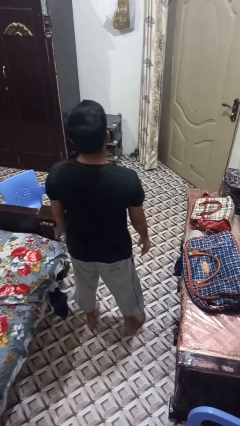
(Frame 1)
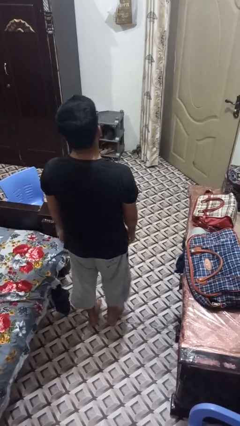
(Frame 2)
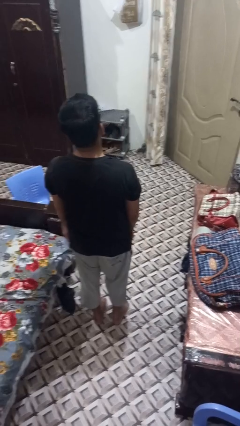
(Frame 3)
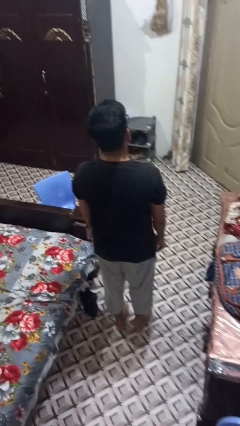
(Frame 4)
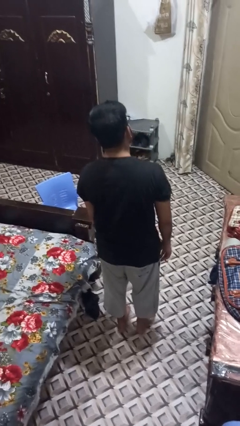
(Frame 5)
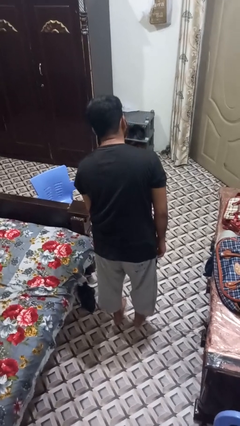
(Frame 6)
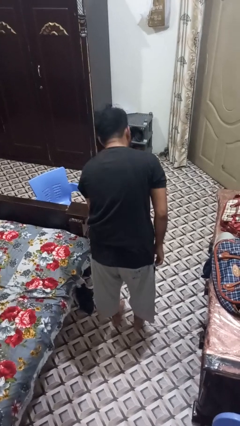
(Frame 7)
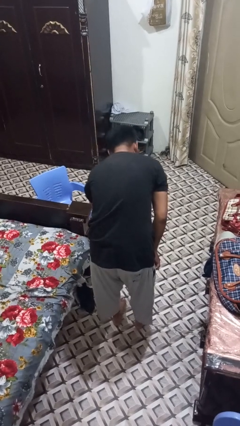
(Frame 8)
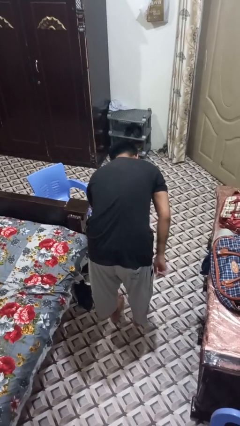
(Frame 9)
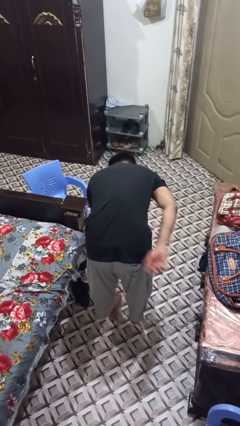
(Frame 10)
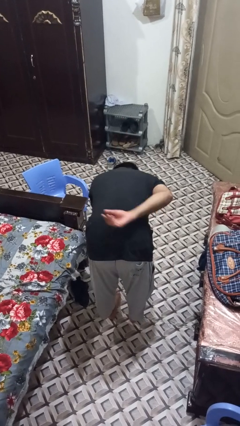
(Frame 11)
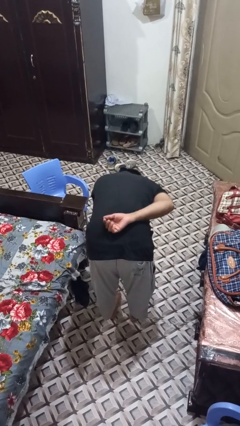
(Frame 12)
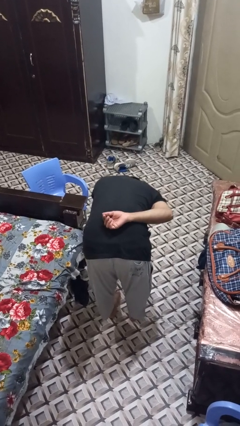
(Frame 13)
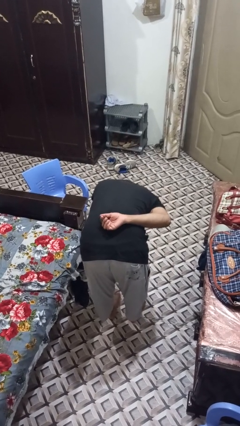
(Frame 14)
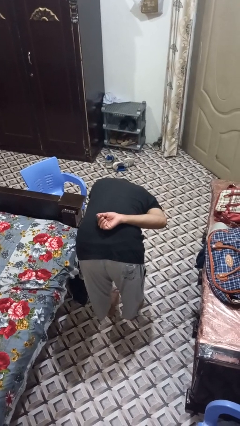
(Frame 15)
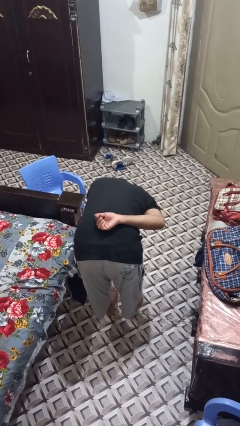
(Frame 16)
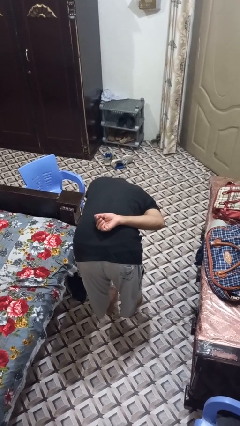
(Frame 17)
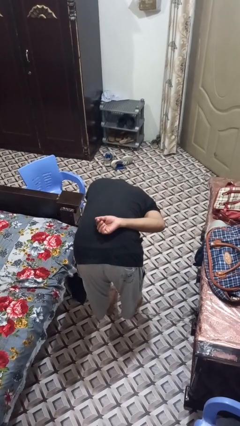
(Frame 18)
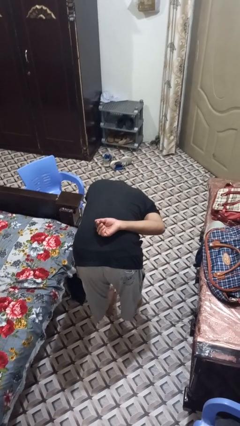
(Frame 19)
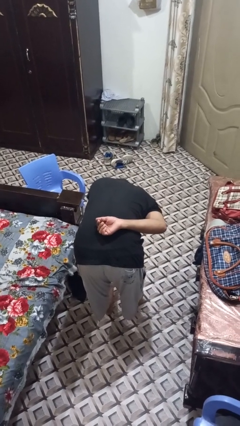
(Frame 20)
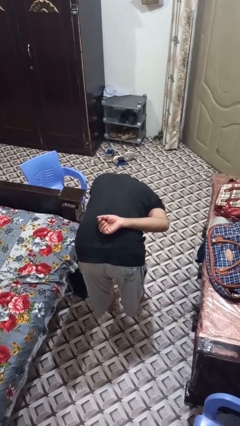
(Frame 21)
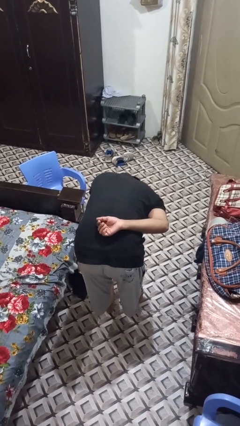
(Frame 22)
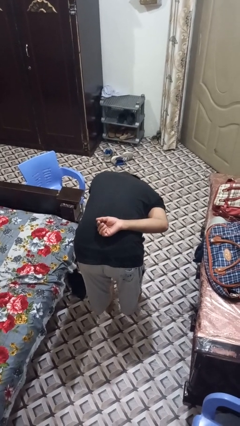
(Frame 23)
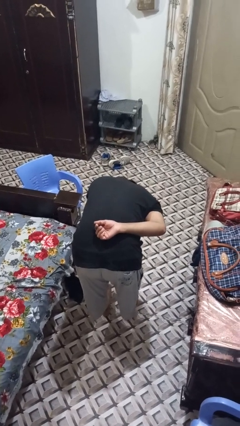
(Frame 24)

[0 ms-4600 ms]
person kneels

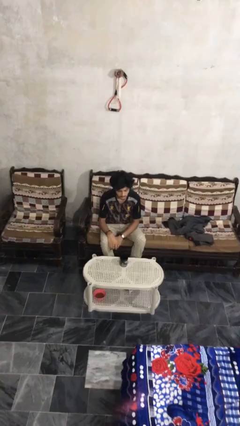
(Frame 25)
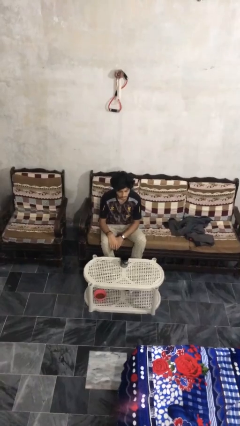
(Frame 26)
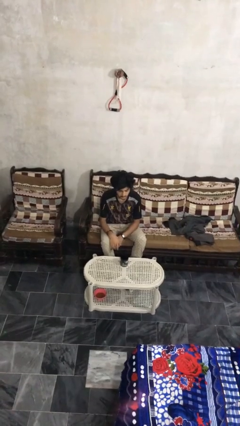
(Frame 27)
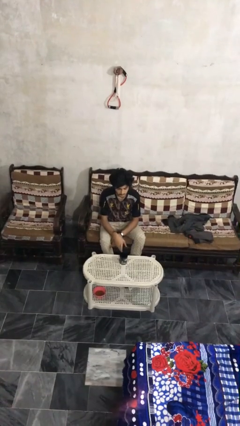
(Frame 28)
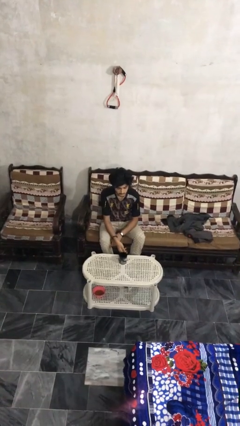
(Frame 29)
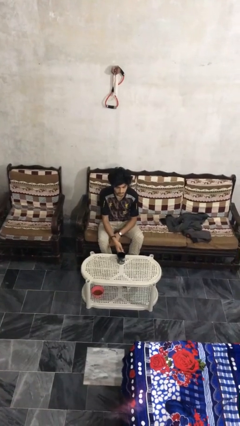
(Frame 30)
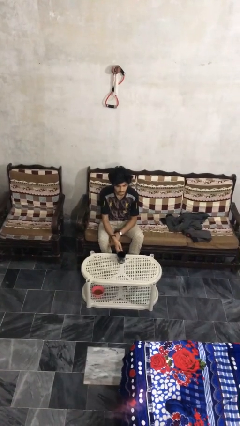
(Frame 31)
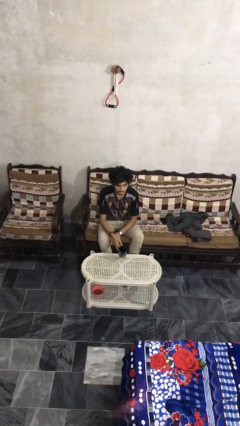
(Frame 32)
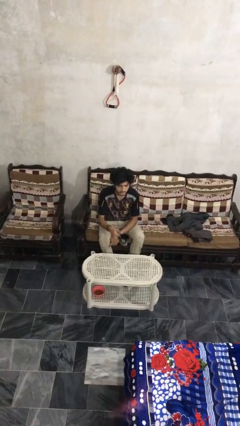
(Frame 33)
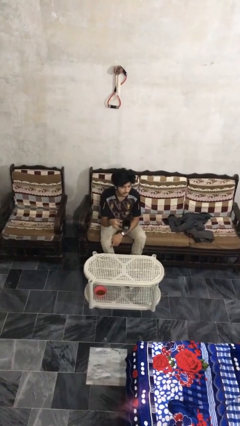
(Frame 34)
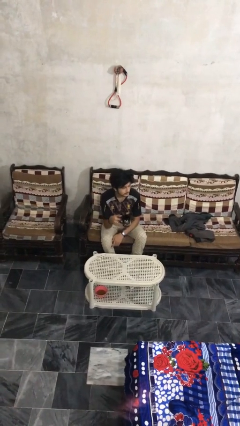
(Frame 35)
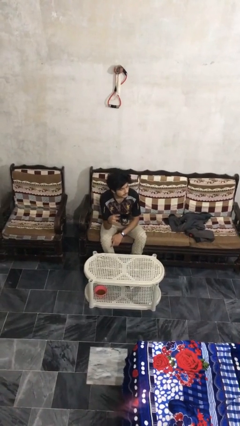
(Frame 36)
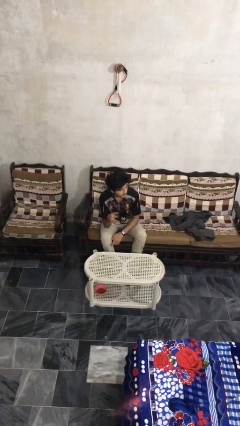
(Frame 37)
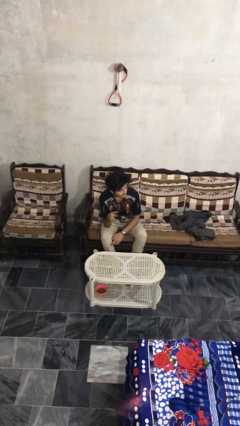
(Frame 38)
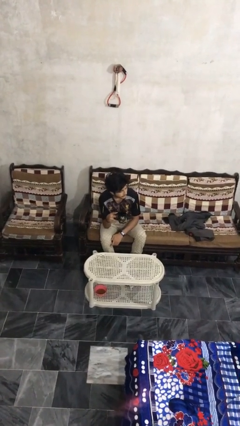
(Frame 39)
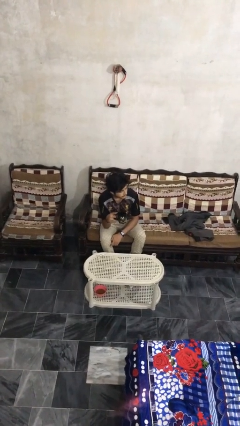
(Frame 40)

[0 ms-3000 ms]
person picks up object from table

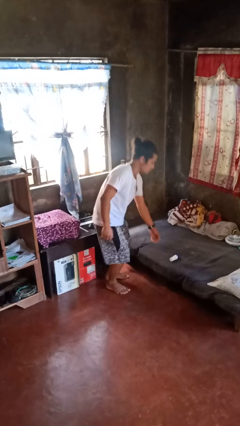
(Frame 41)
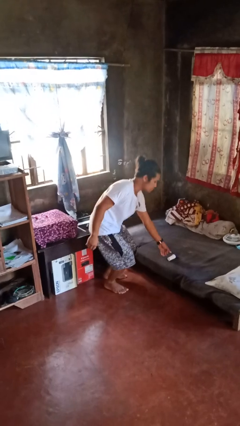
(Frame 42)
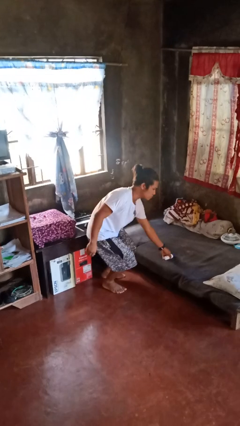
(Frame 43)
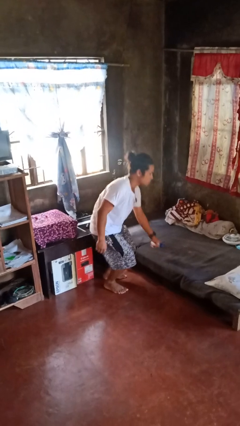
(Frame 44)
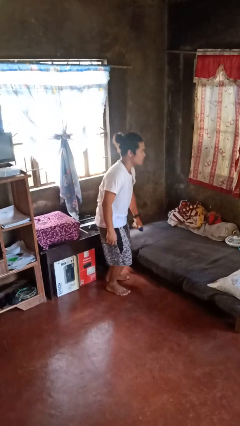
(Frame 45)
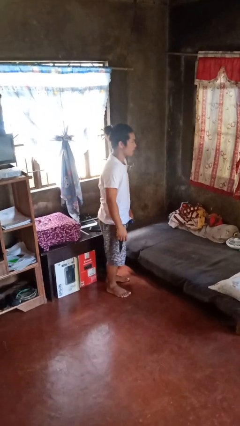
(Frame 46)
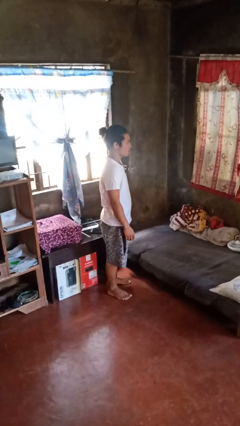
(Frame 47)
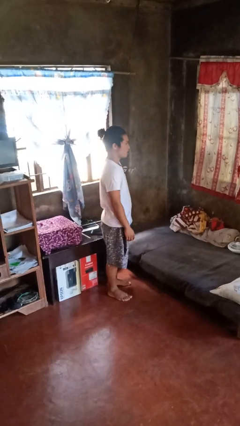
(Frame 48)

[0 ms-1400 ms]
person picks up object from bed

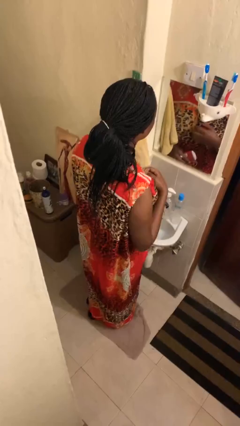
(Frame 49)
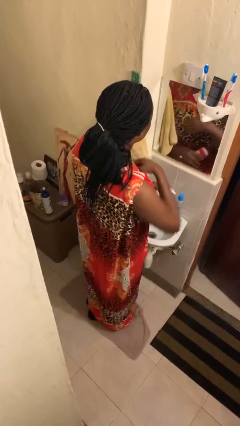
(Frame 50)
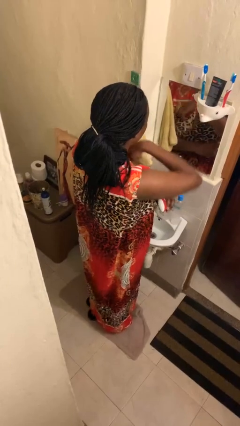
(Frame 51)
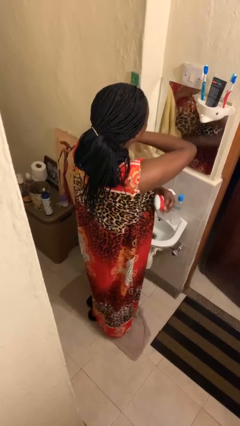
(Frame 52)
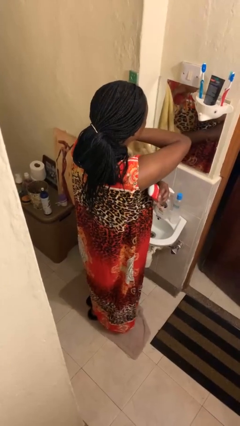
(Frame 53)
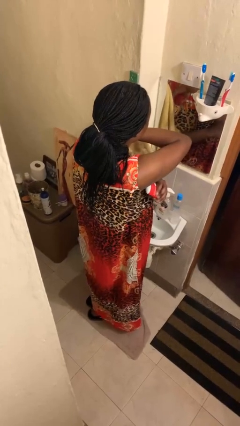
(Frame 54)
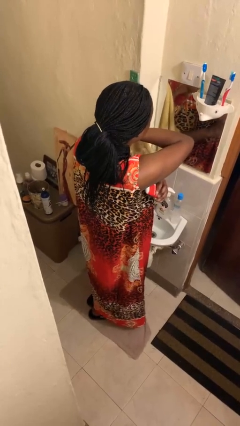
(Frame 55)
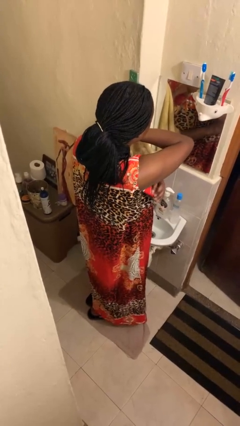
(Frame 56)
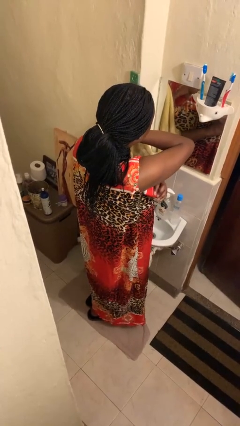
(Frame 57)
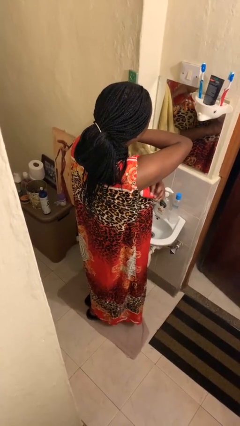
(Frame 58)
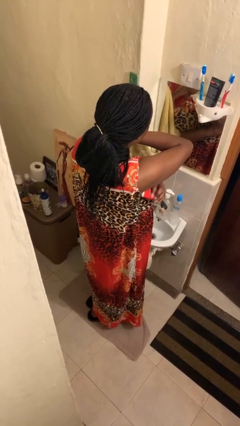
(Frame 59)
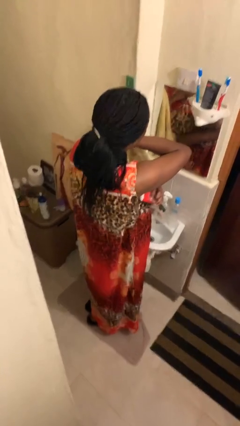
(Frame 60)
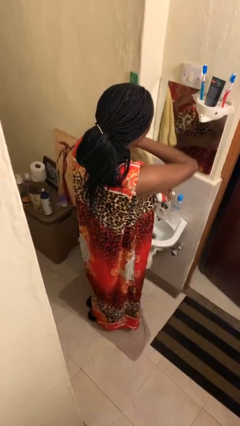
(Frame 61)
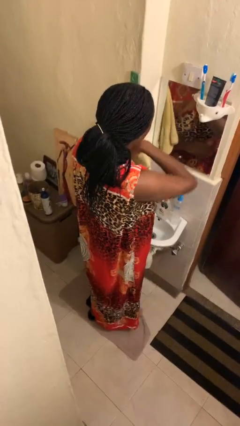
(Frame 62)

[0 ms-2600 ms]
person applies deodorant

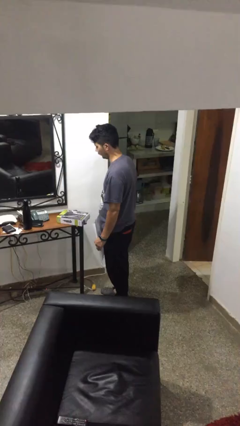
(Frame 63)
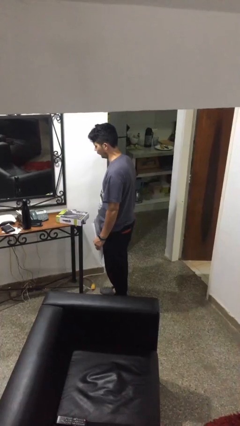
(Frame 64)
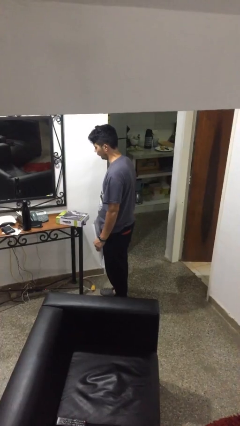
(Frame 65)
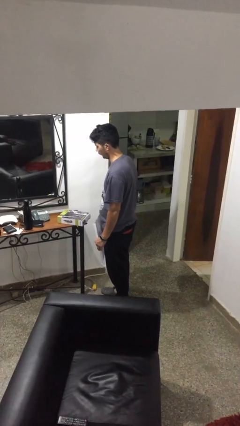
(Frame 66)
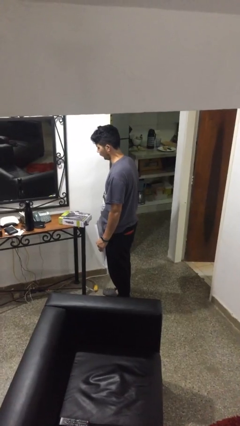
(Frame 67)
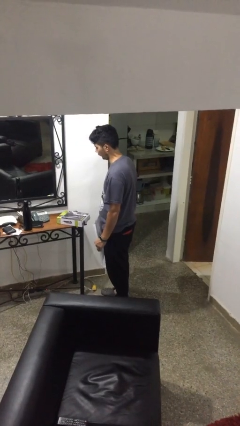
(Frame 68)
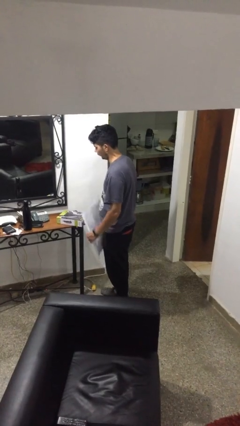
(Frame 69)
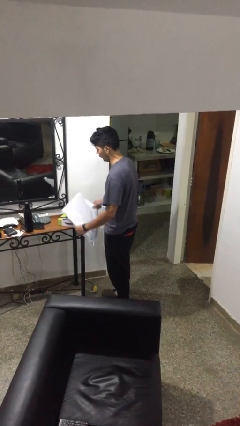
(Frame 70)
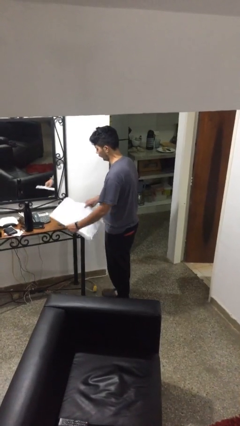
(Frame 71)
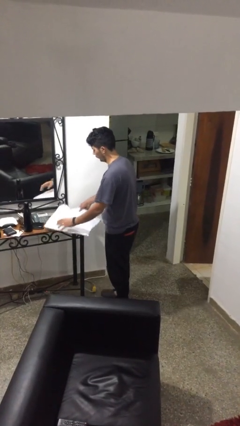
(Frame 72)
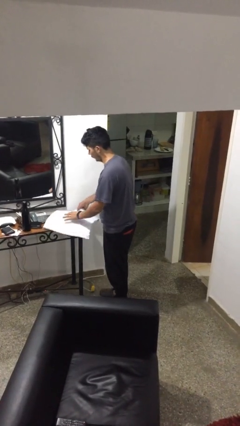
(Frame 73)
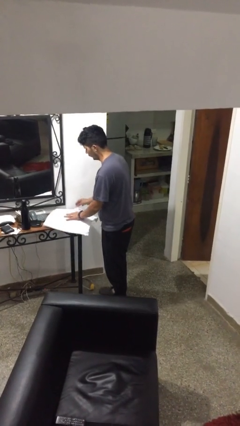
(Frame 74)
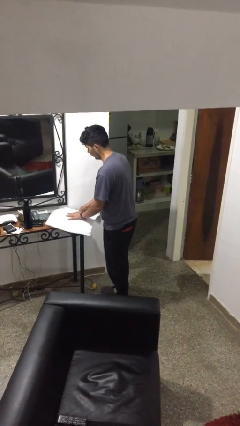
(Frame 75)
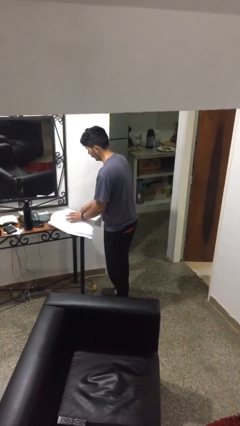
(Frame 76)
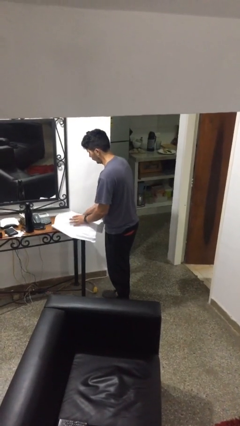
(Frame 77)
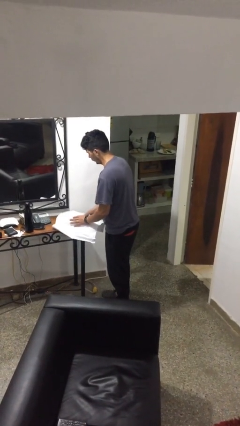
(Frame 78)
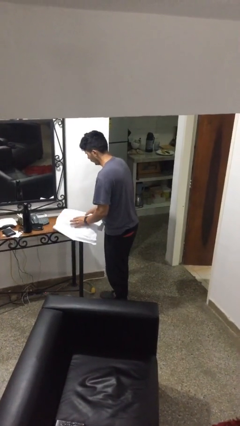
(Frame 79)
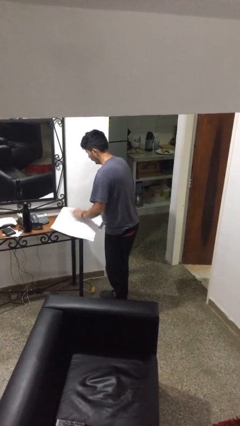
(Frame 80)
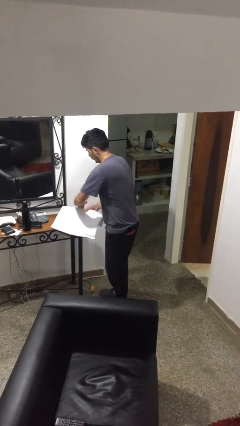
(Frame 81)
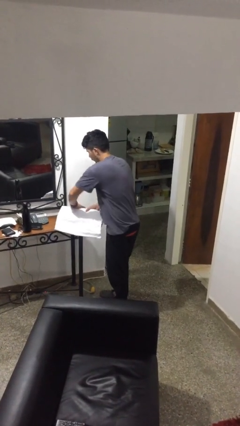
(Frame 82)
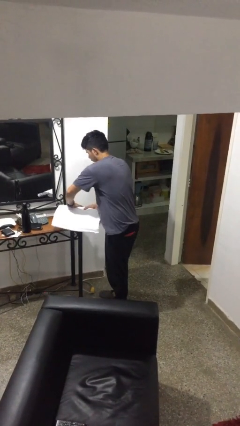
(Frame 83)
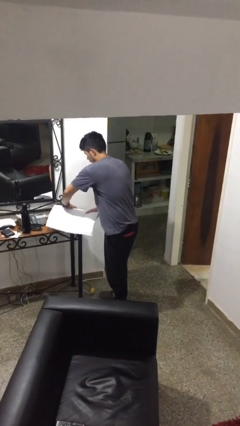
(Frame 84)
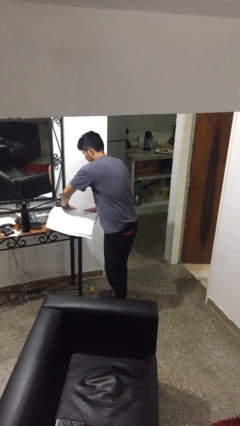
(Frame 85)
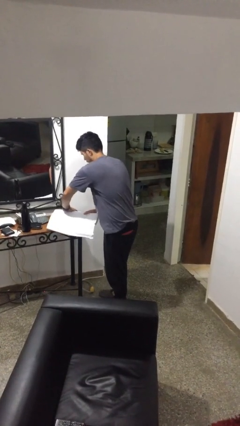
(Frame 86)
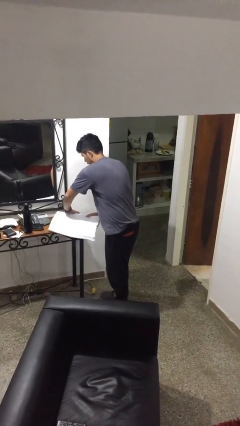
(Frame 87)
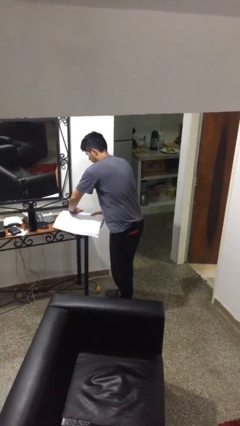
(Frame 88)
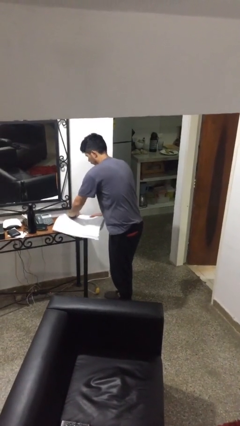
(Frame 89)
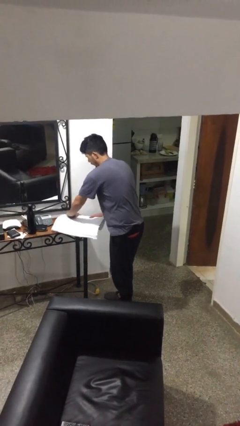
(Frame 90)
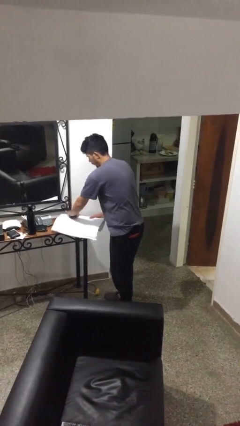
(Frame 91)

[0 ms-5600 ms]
person wraps box

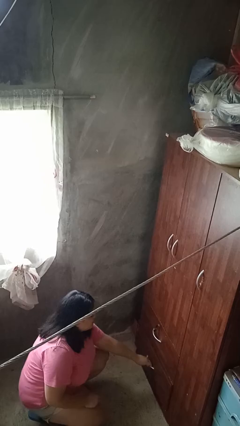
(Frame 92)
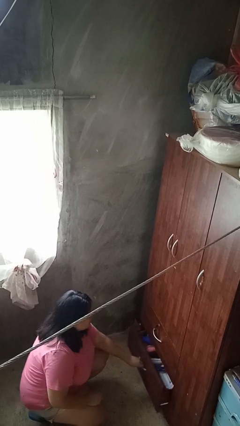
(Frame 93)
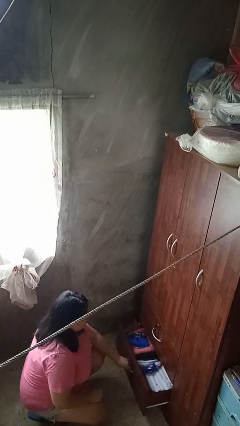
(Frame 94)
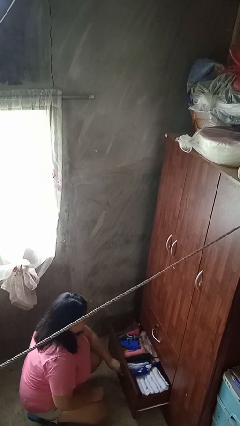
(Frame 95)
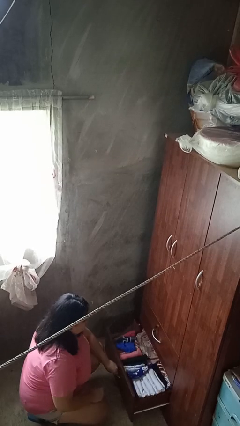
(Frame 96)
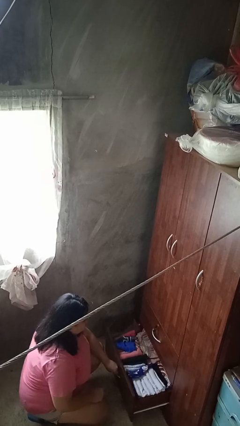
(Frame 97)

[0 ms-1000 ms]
person opens dresser drawer
